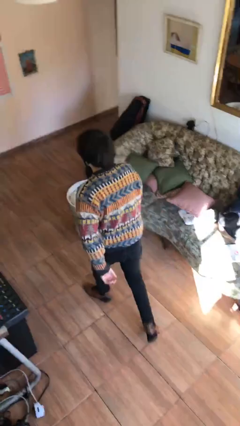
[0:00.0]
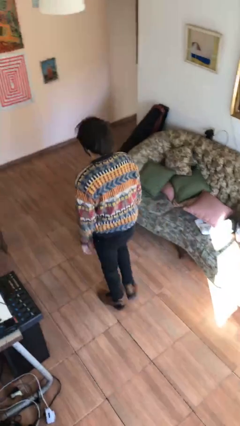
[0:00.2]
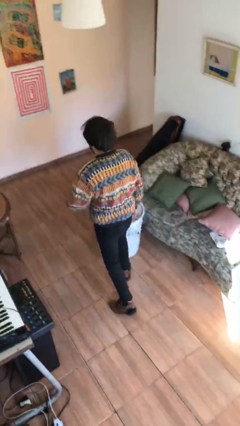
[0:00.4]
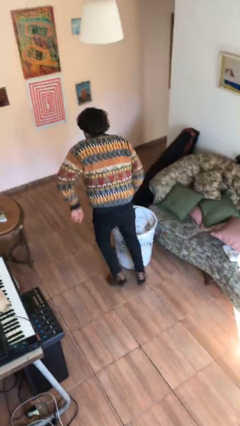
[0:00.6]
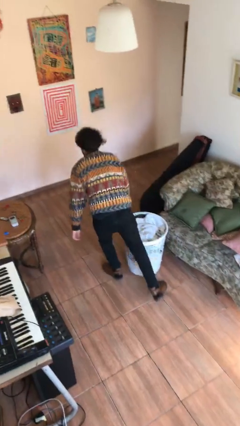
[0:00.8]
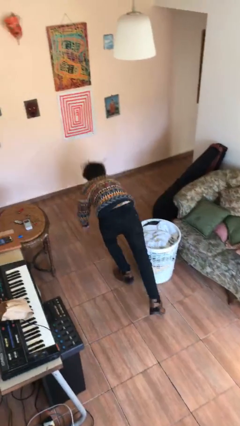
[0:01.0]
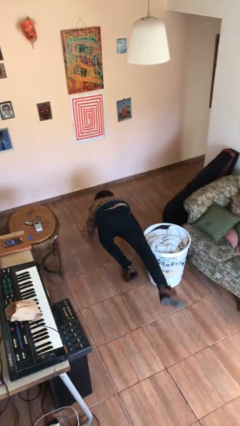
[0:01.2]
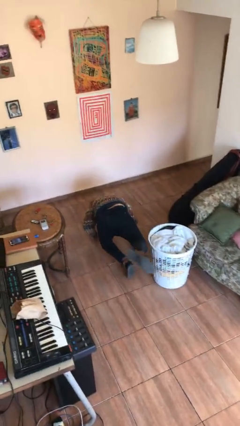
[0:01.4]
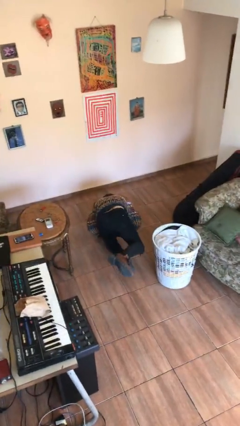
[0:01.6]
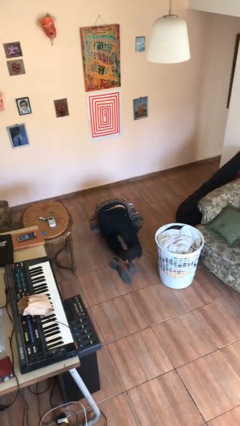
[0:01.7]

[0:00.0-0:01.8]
person trips on object on floor

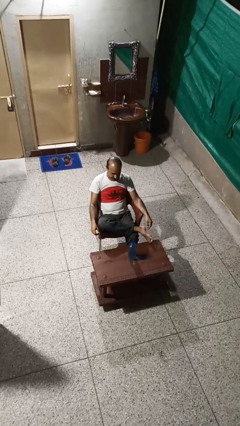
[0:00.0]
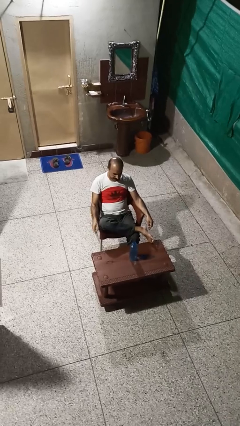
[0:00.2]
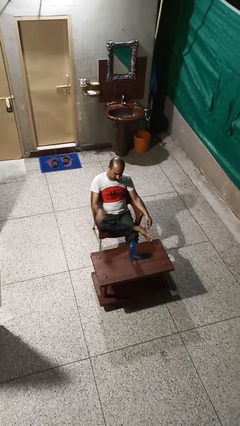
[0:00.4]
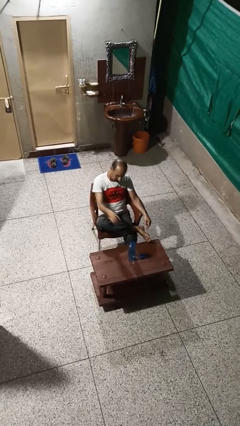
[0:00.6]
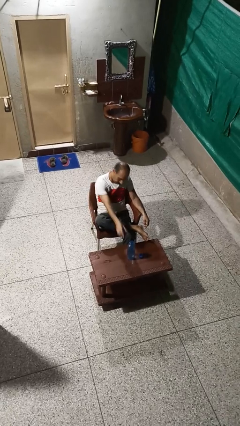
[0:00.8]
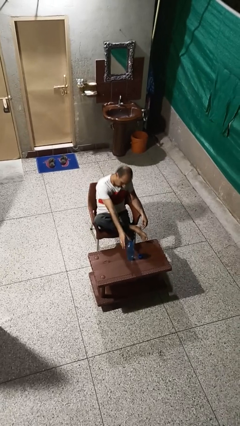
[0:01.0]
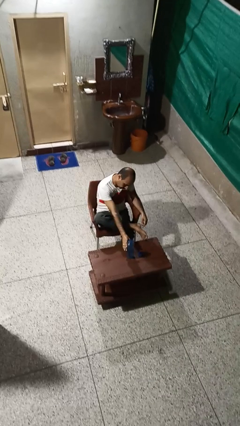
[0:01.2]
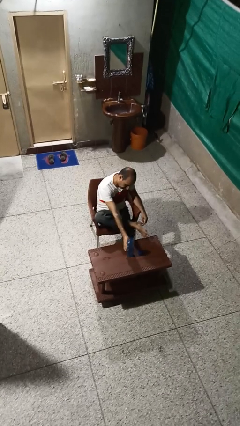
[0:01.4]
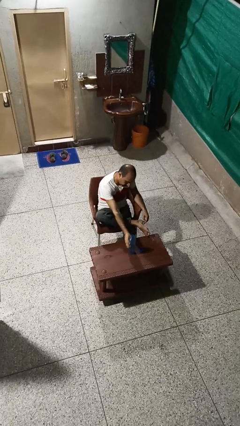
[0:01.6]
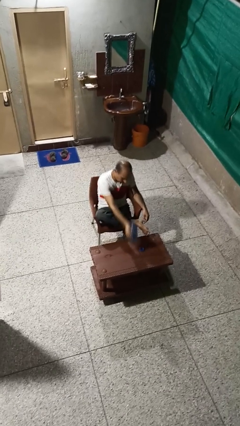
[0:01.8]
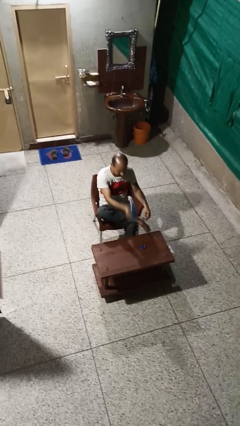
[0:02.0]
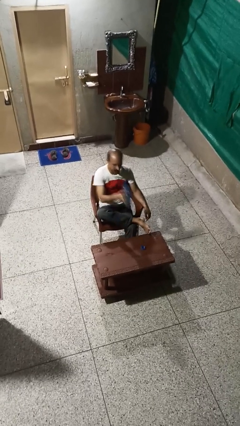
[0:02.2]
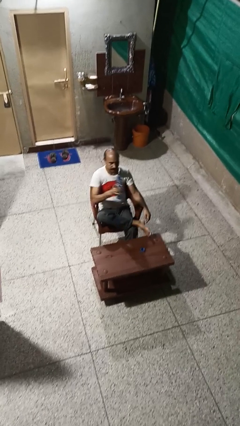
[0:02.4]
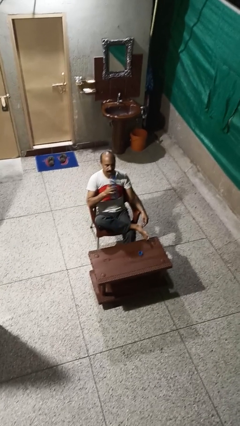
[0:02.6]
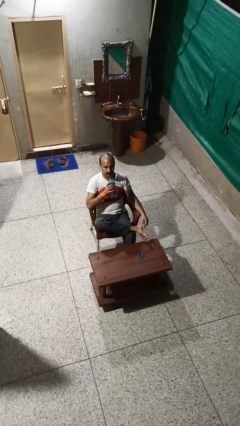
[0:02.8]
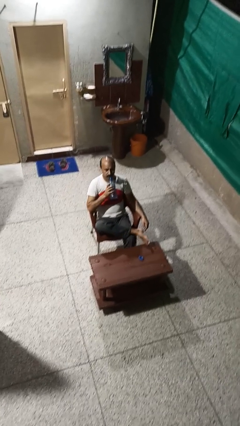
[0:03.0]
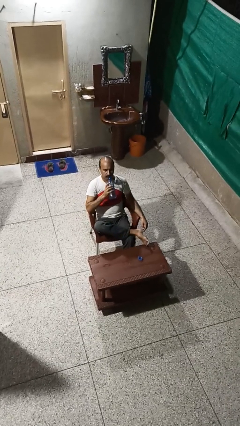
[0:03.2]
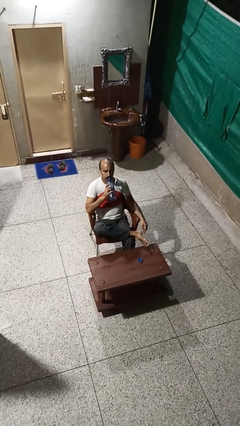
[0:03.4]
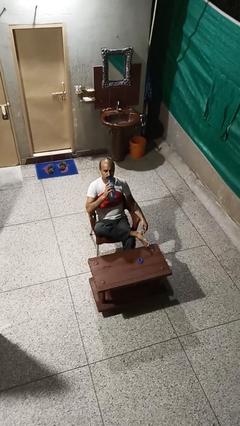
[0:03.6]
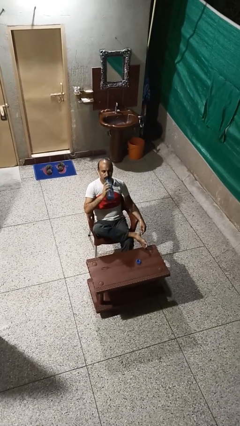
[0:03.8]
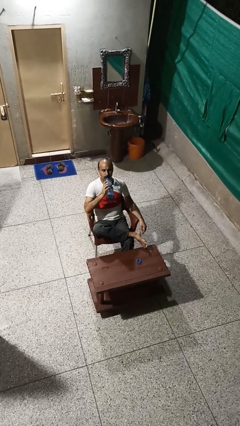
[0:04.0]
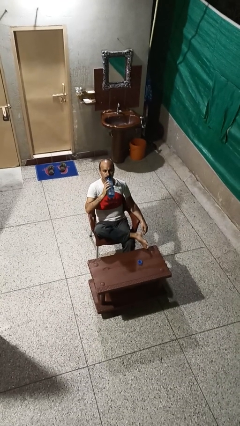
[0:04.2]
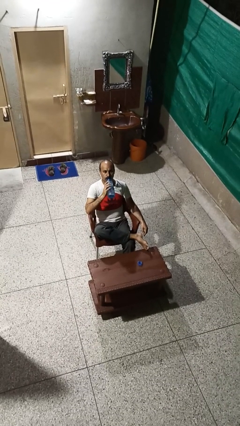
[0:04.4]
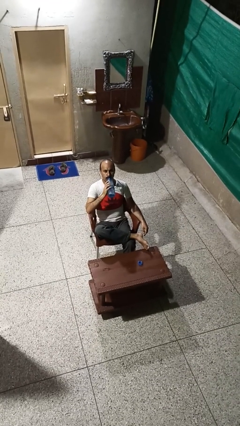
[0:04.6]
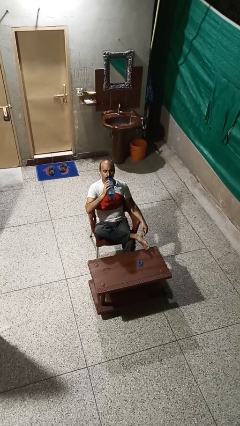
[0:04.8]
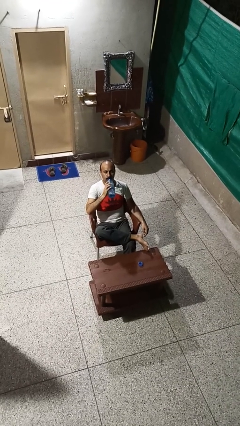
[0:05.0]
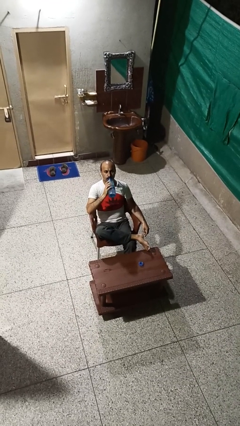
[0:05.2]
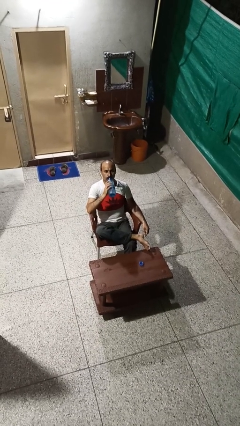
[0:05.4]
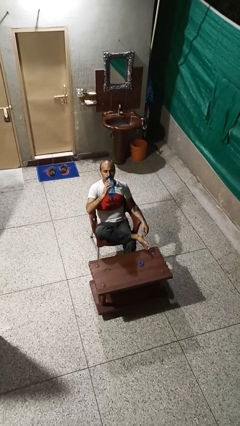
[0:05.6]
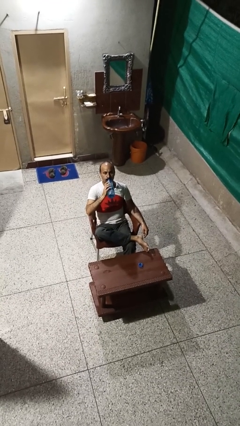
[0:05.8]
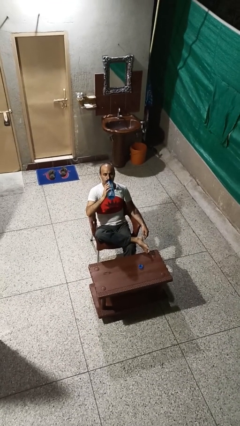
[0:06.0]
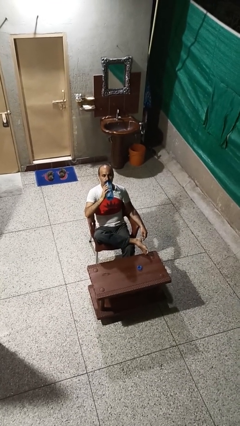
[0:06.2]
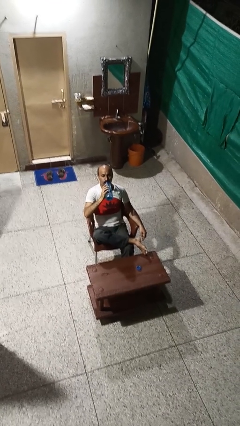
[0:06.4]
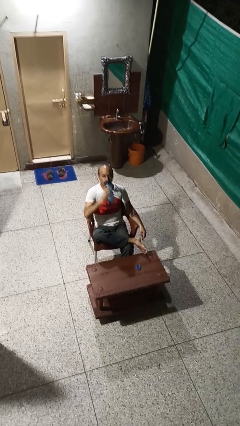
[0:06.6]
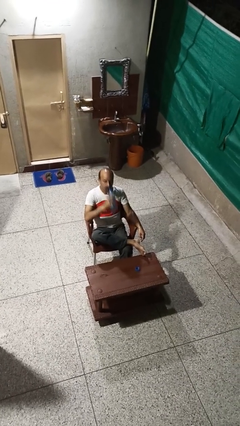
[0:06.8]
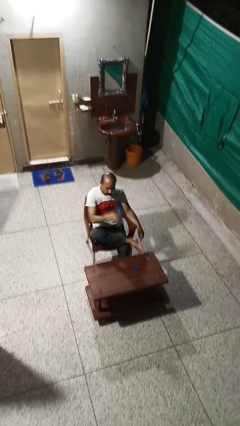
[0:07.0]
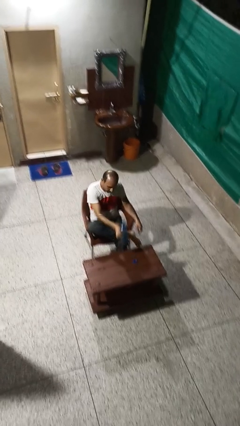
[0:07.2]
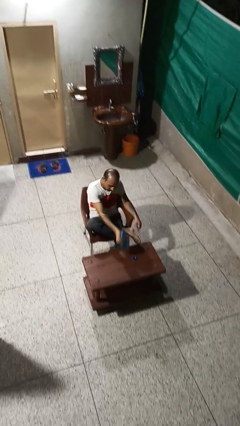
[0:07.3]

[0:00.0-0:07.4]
person drinks from bottle

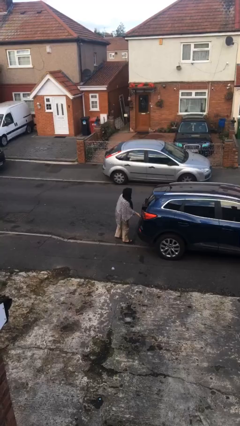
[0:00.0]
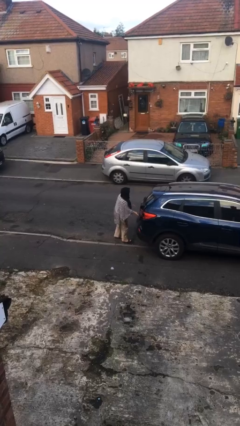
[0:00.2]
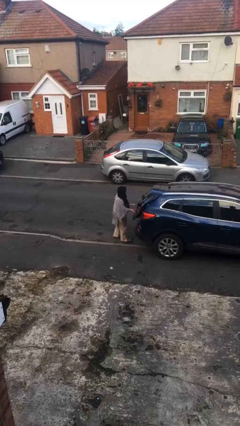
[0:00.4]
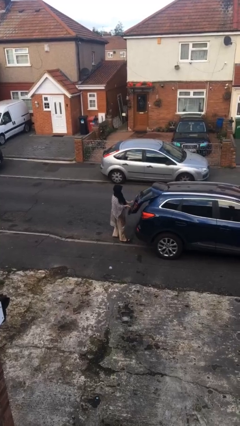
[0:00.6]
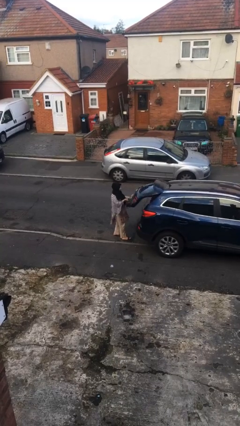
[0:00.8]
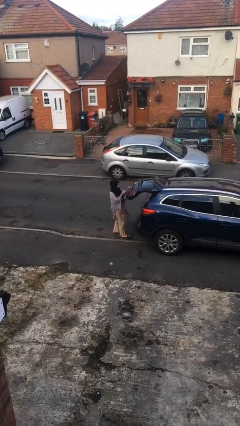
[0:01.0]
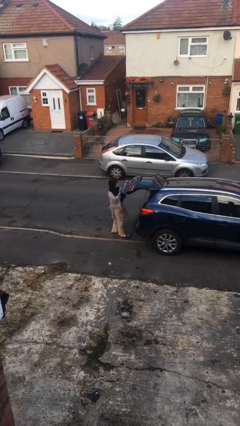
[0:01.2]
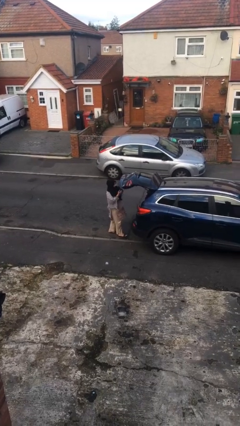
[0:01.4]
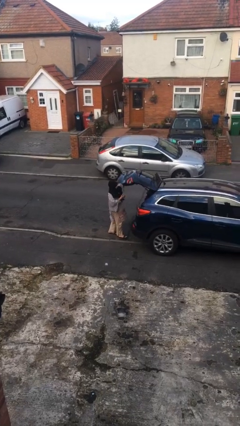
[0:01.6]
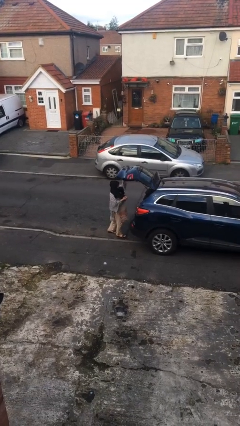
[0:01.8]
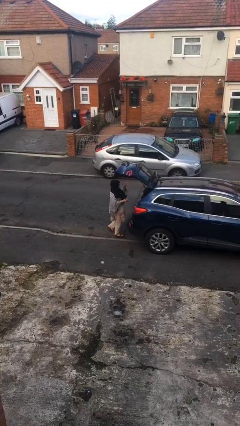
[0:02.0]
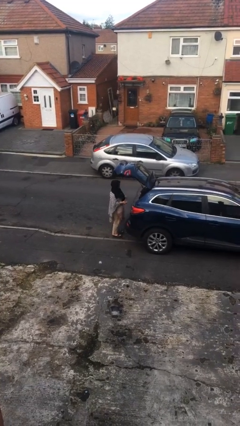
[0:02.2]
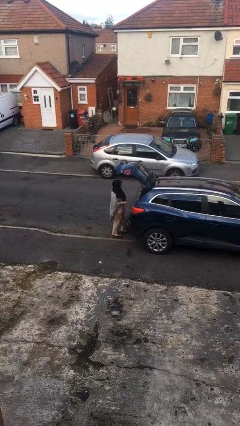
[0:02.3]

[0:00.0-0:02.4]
person opens car trunk

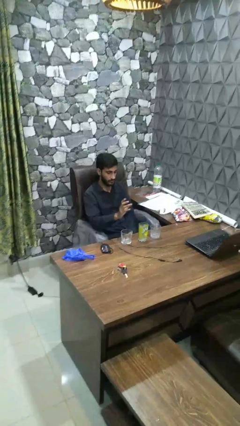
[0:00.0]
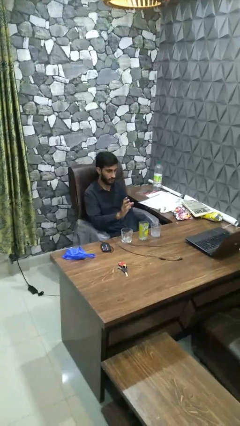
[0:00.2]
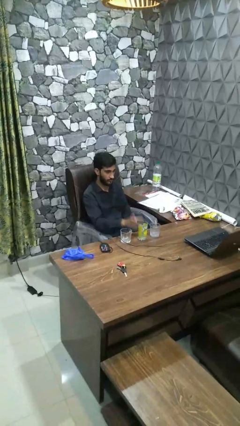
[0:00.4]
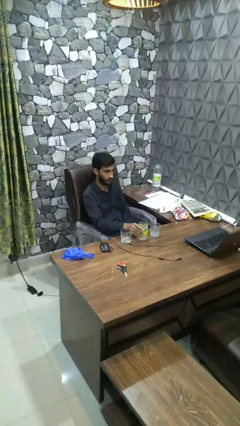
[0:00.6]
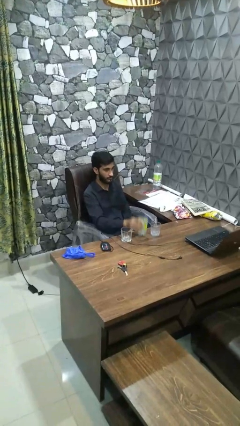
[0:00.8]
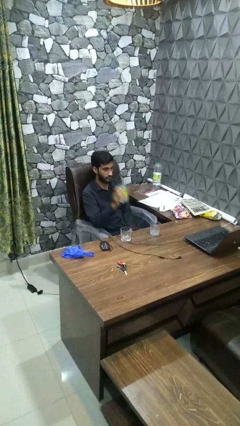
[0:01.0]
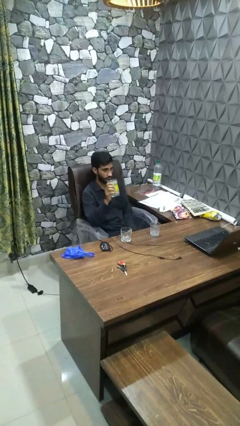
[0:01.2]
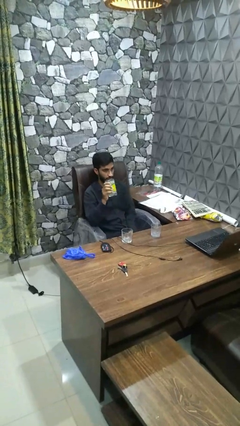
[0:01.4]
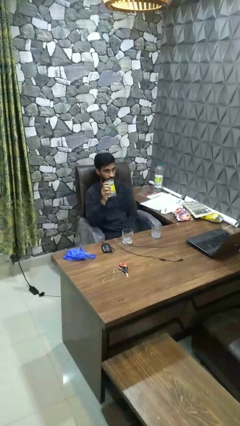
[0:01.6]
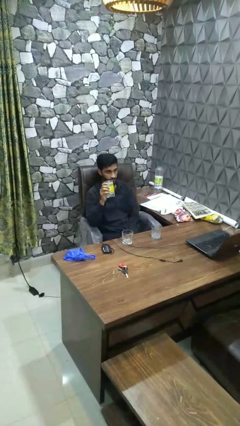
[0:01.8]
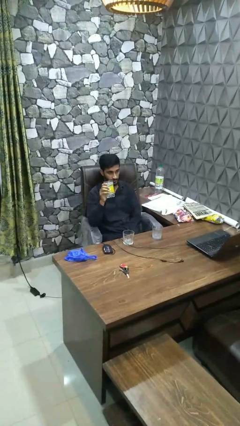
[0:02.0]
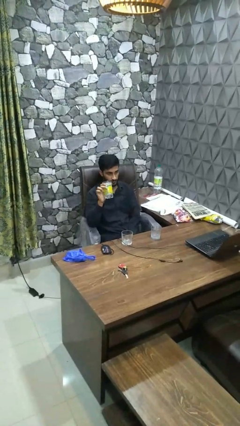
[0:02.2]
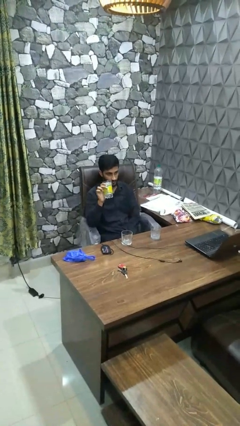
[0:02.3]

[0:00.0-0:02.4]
person picks up object from table

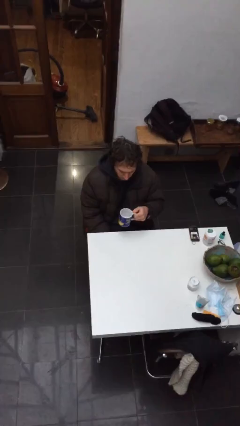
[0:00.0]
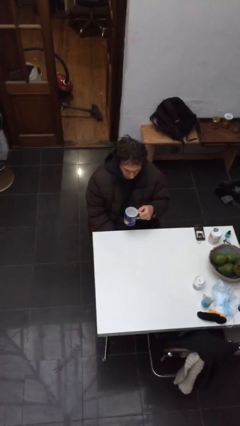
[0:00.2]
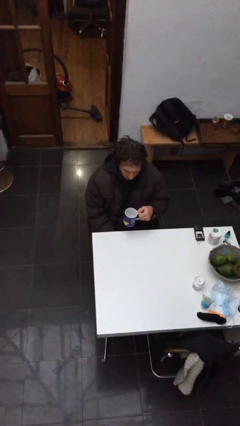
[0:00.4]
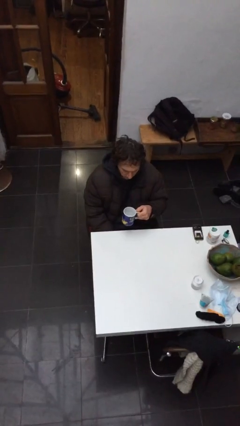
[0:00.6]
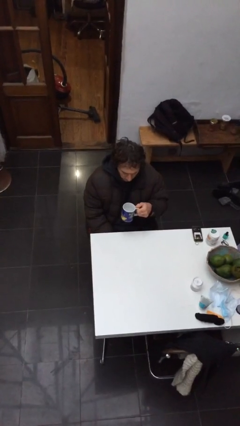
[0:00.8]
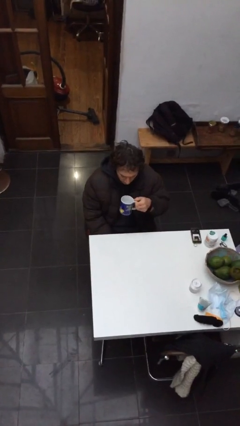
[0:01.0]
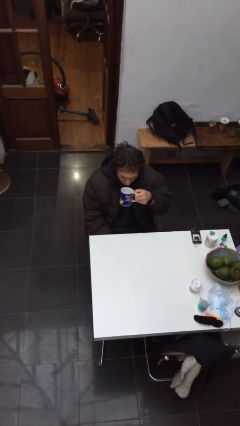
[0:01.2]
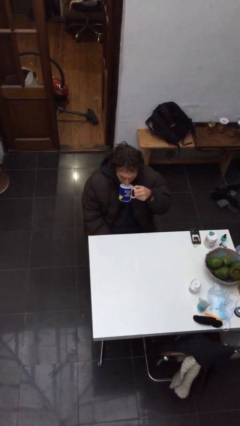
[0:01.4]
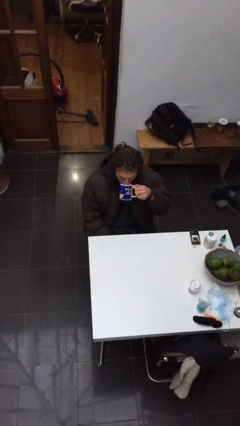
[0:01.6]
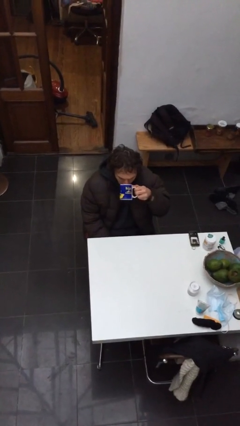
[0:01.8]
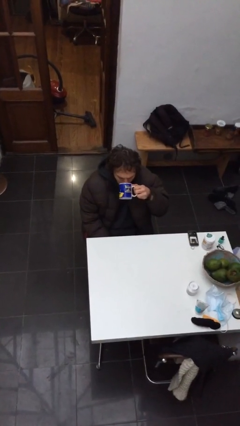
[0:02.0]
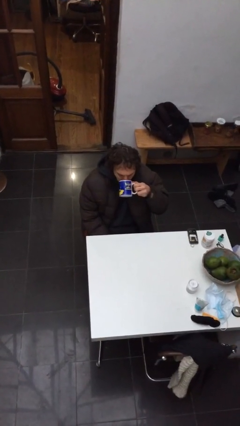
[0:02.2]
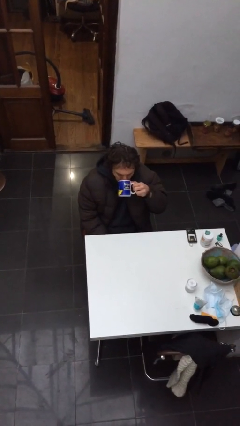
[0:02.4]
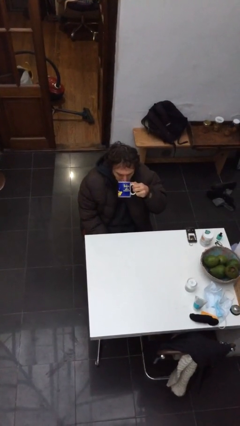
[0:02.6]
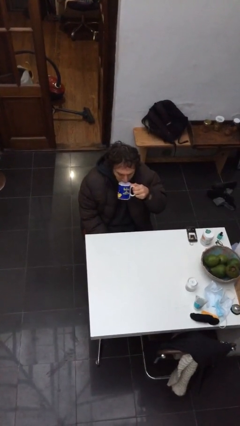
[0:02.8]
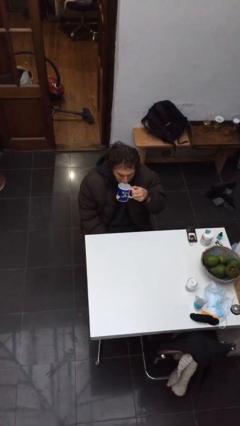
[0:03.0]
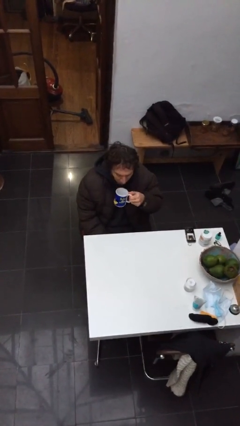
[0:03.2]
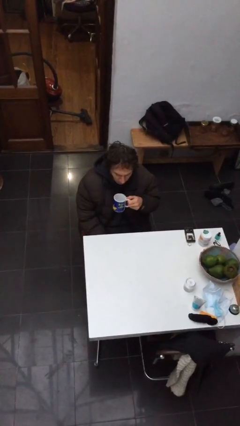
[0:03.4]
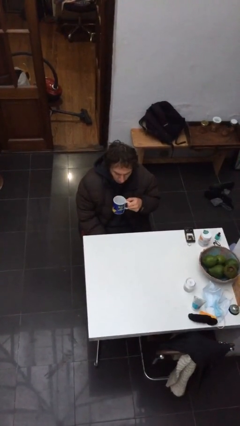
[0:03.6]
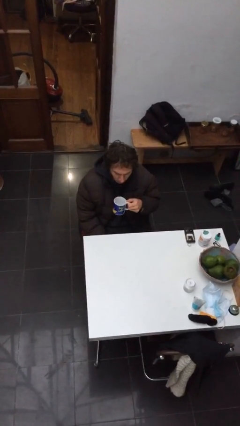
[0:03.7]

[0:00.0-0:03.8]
person drinks from mug
